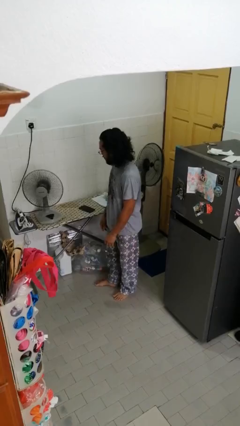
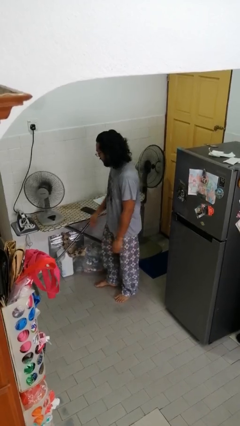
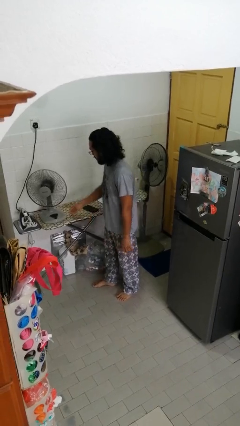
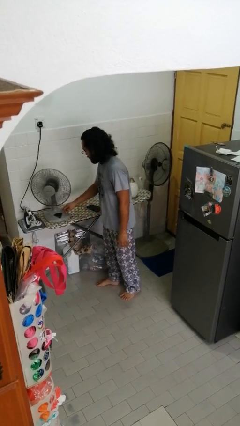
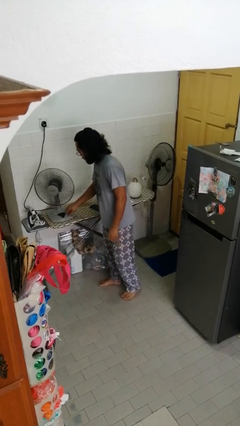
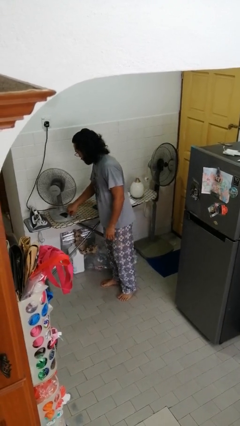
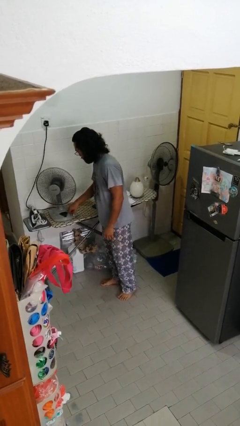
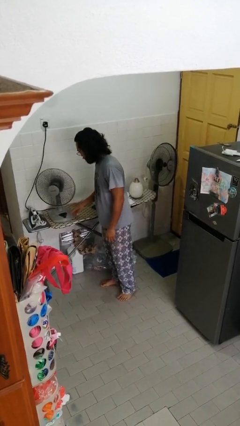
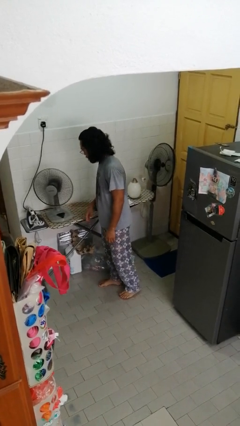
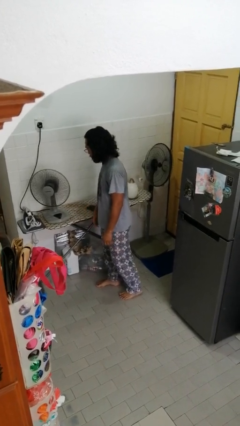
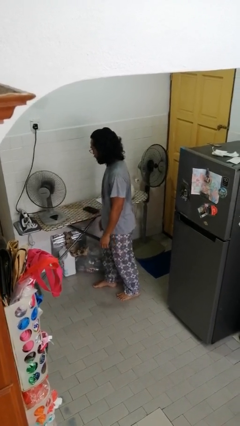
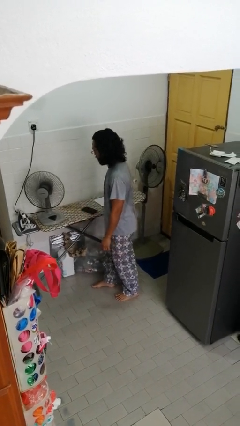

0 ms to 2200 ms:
person turns on fan

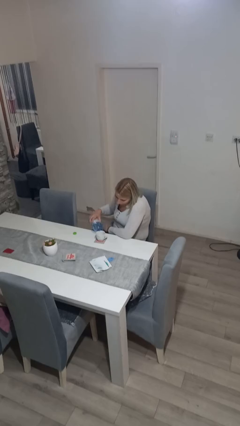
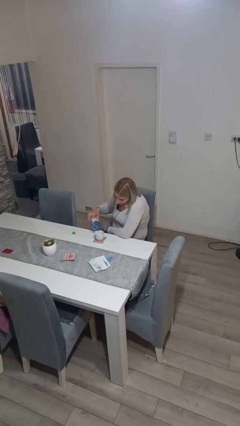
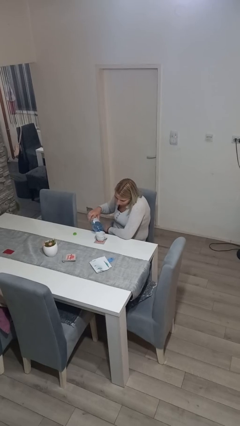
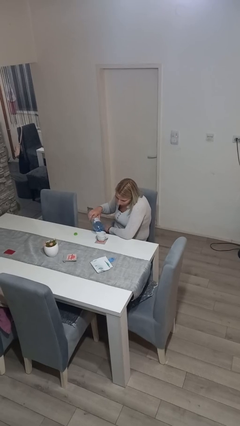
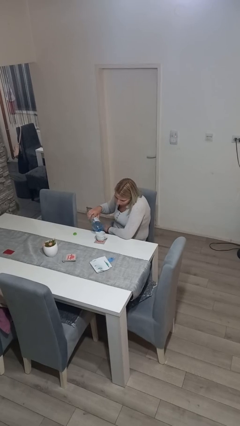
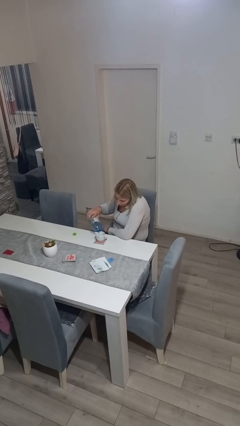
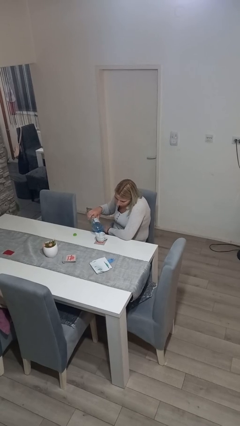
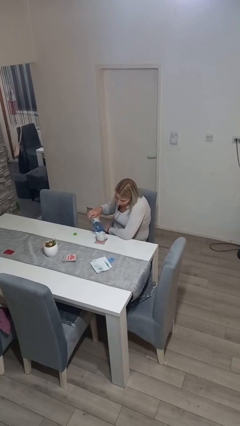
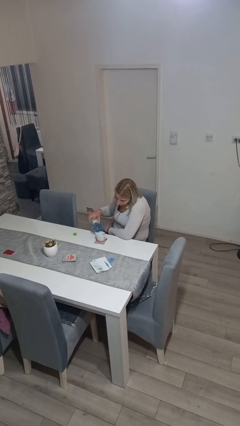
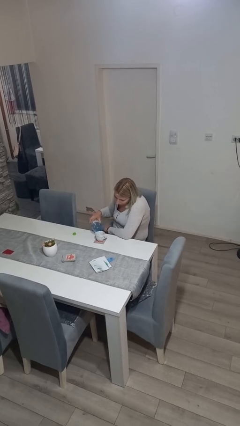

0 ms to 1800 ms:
person pours liquid into cup

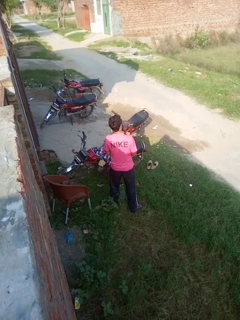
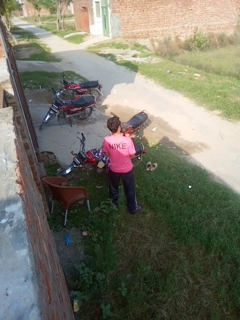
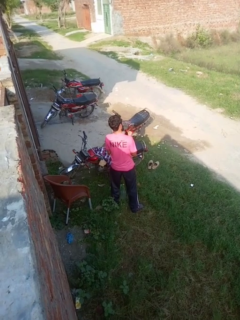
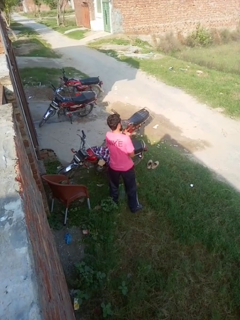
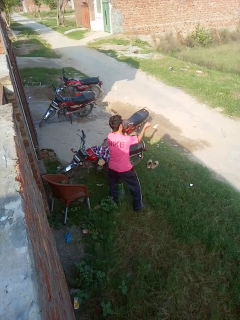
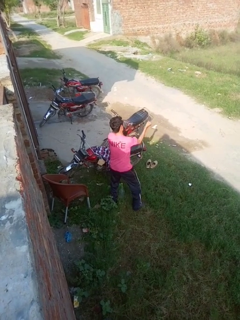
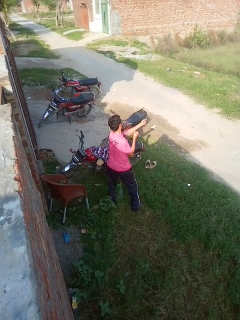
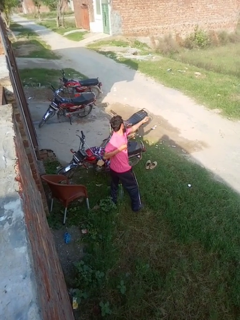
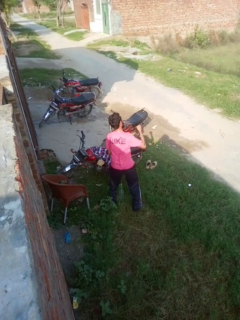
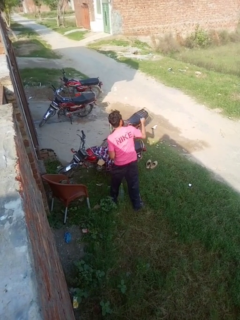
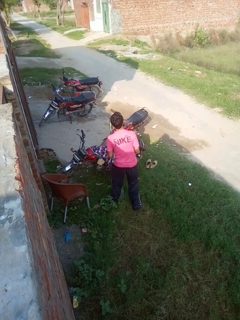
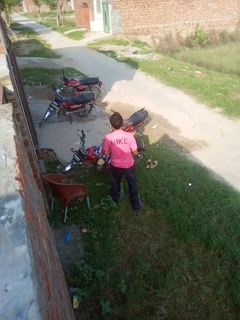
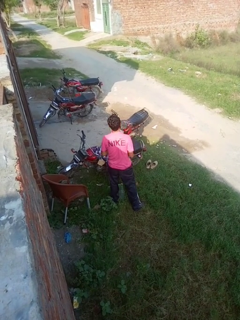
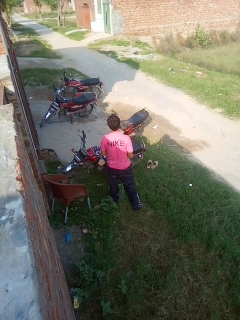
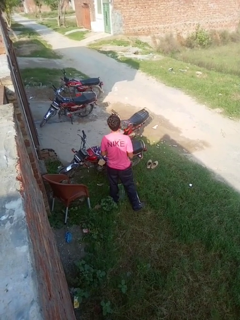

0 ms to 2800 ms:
person punches

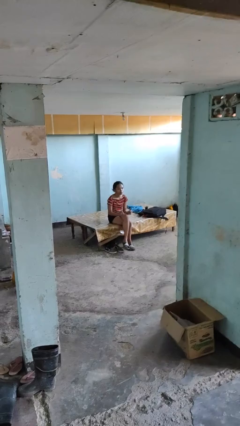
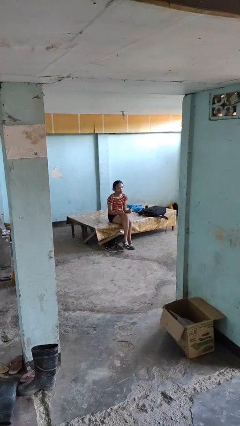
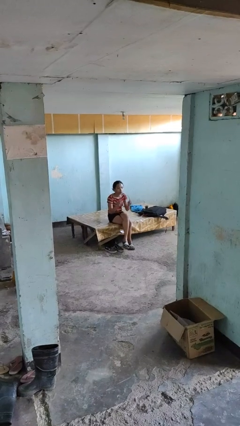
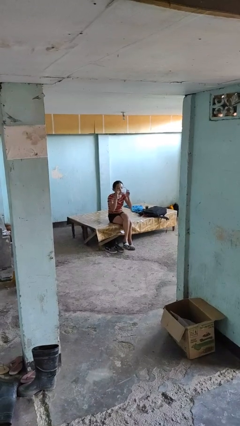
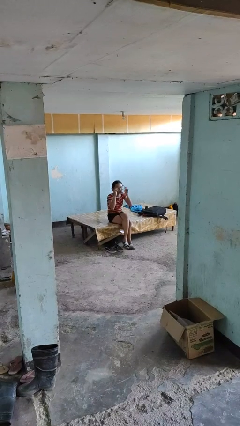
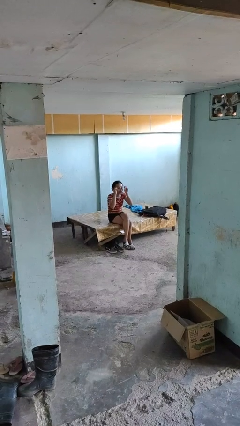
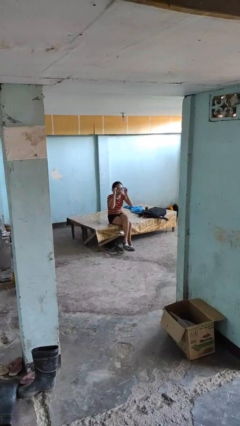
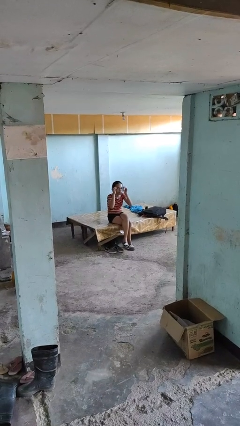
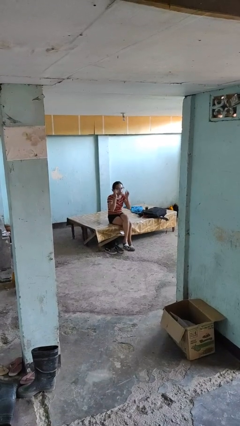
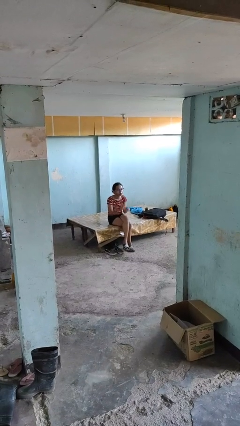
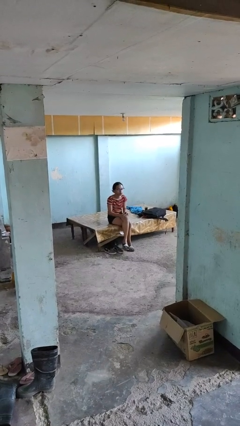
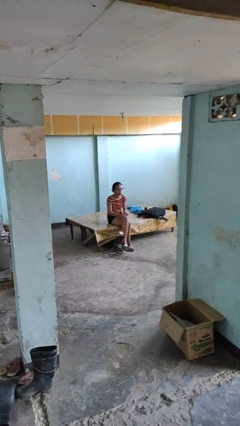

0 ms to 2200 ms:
person puts on glasses

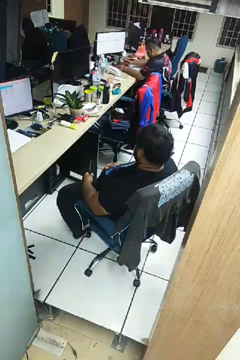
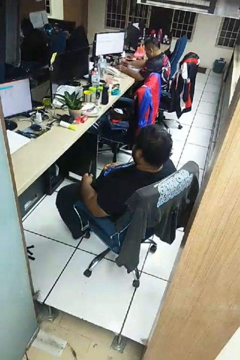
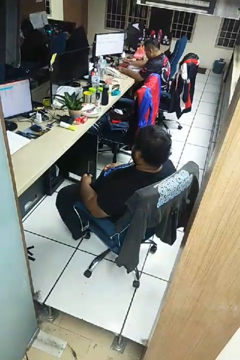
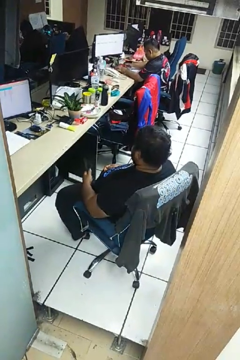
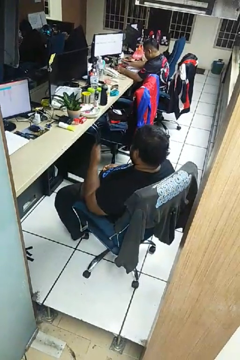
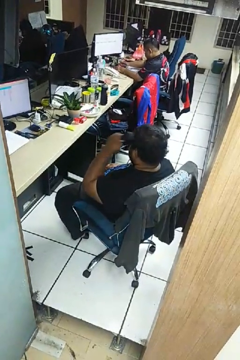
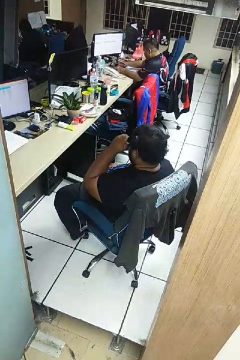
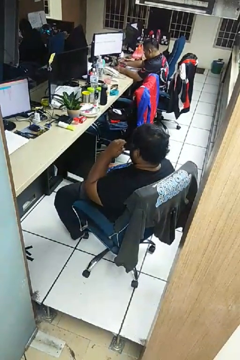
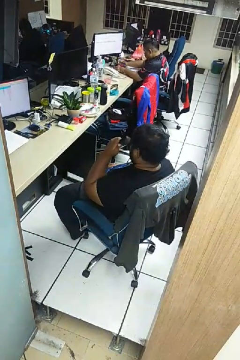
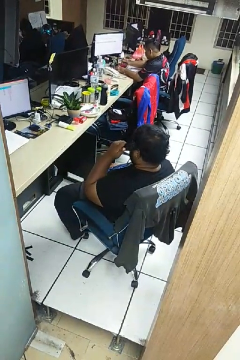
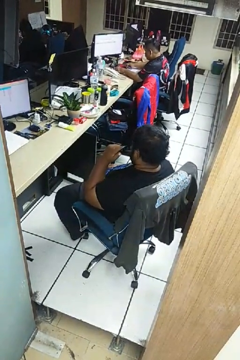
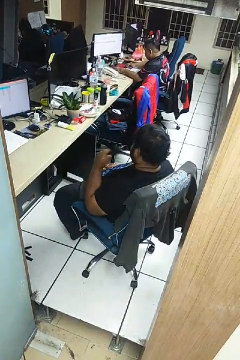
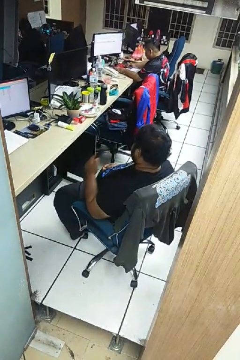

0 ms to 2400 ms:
person brushes hair

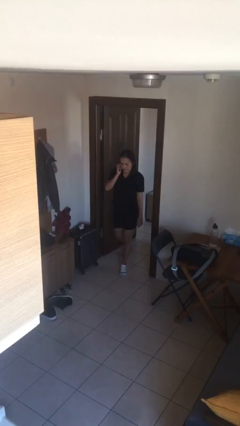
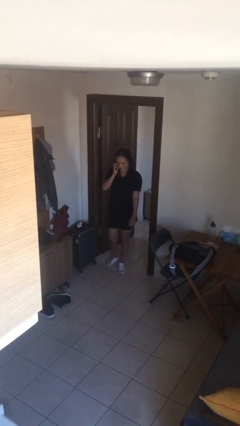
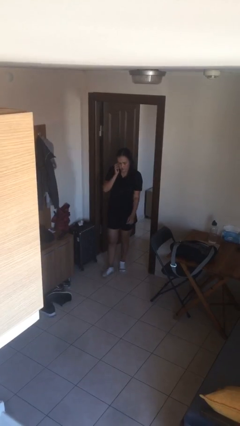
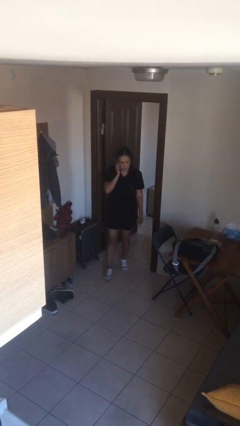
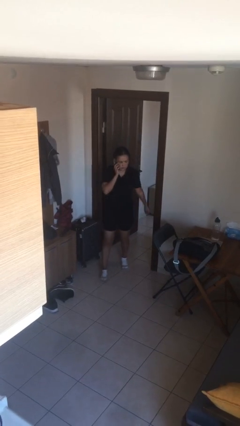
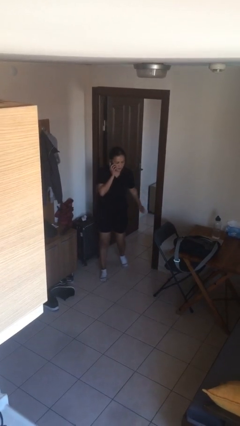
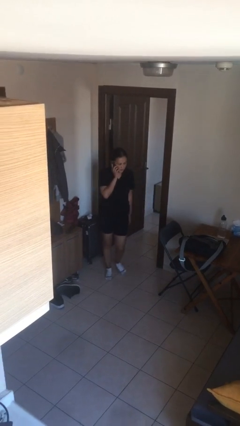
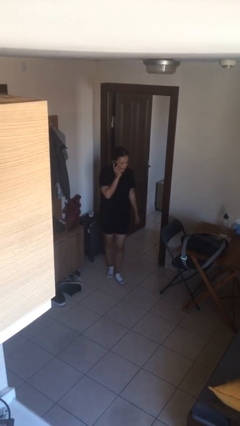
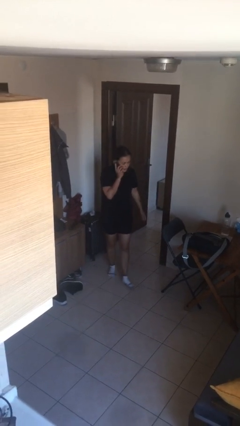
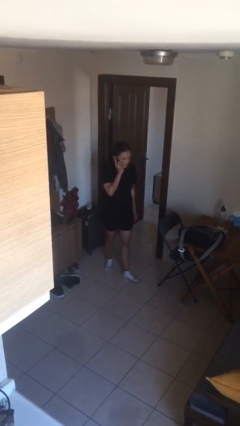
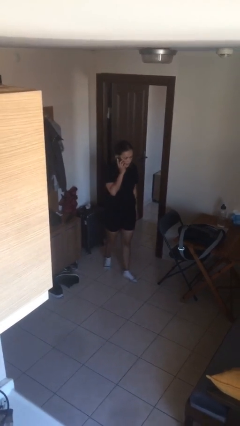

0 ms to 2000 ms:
person enters scene through structure

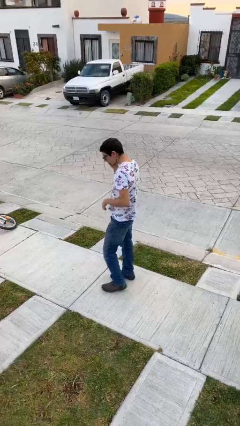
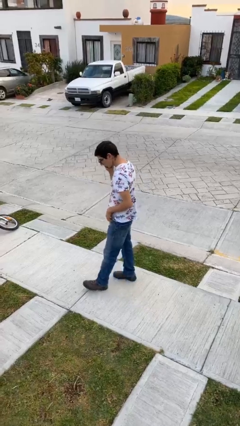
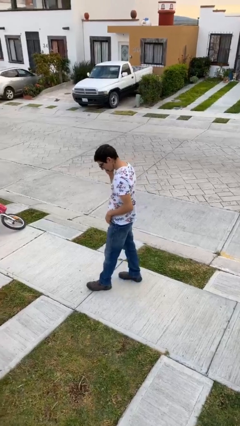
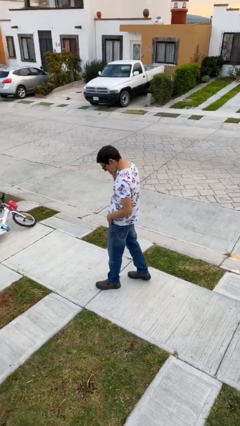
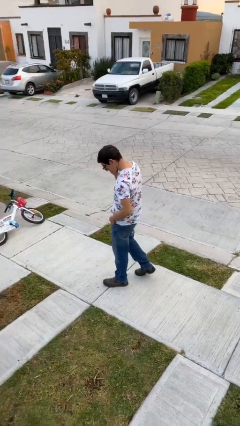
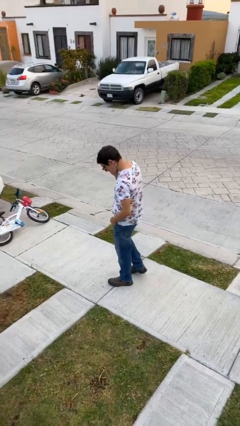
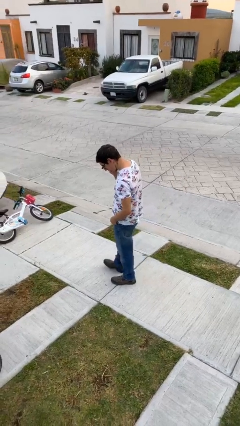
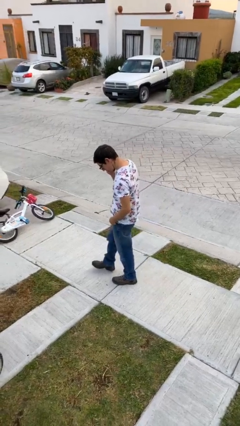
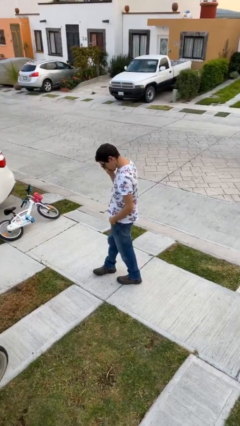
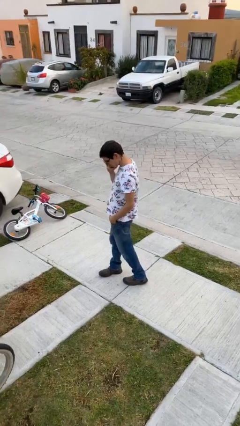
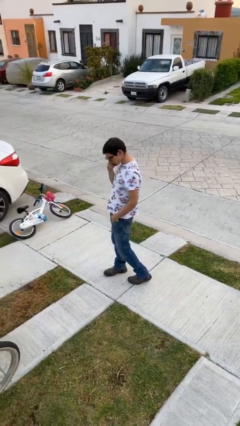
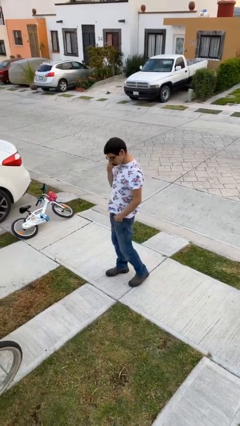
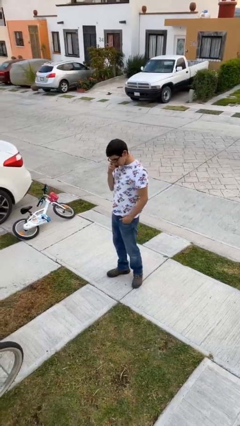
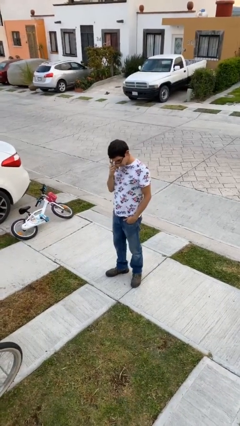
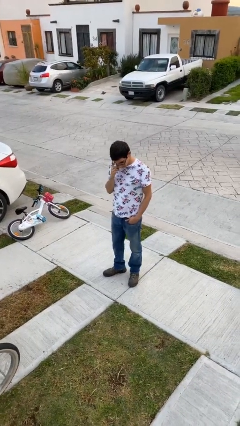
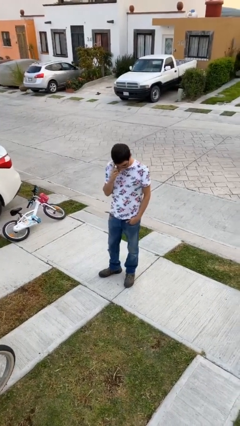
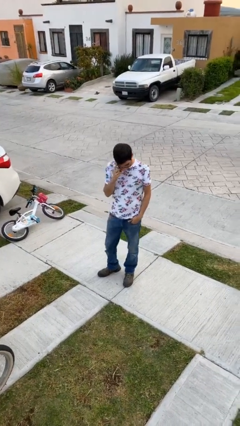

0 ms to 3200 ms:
person talks on phone

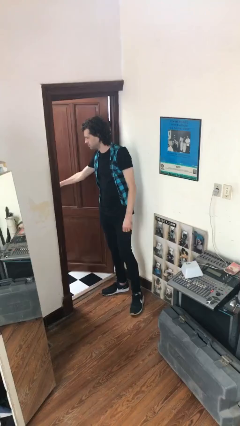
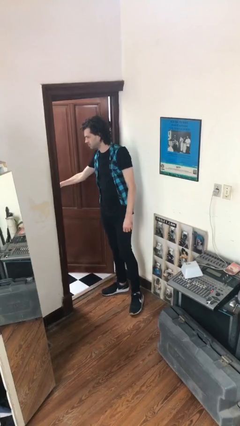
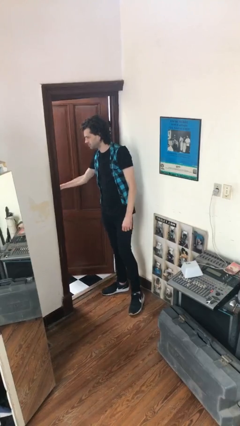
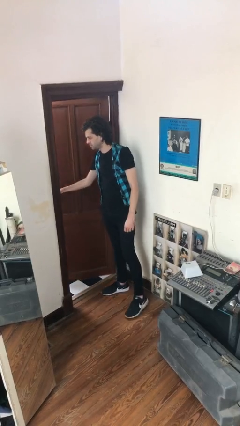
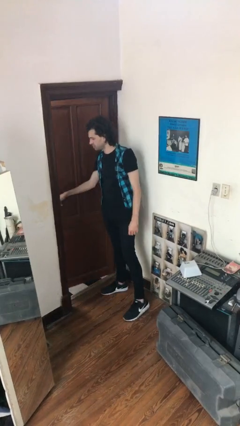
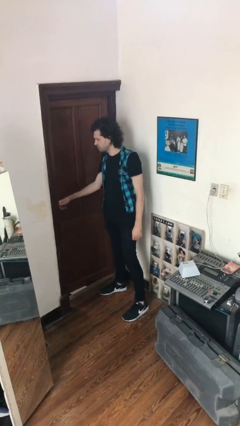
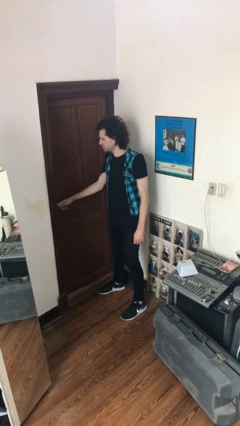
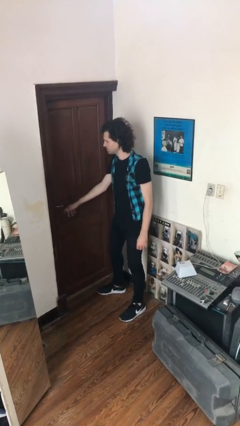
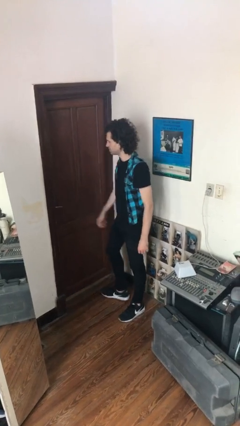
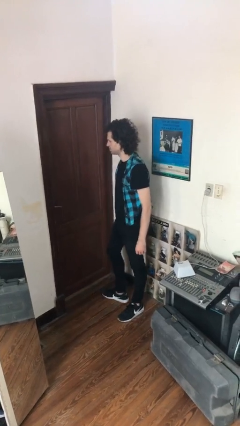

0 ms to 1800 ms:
person closes facility door
